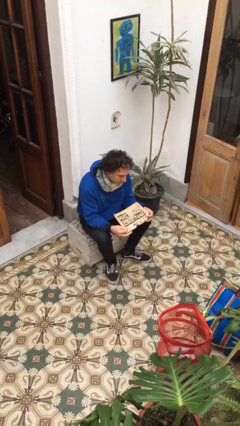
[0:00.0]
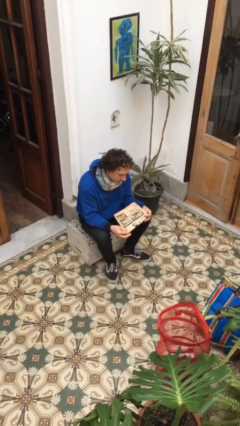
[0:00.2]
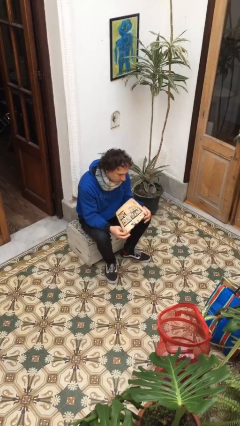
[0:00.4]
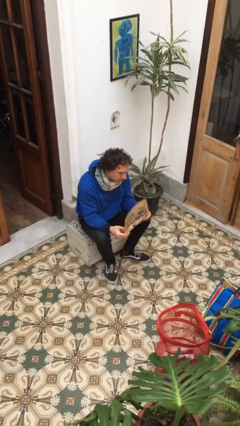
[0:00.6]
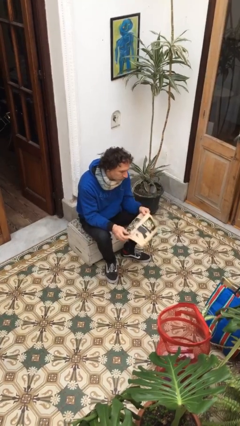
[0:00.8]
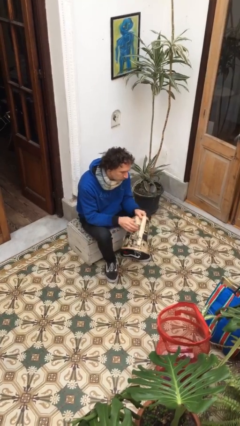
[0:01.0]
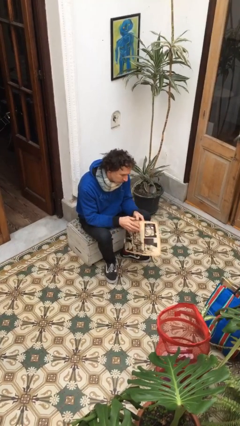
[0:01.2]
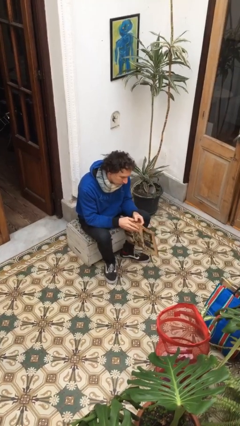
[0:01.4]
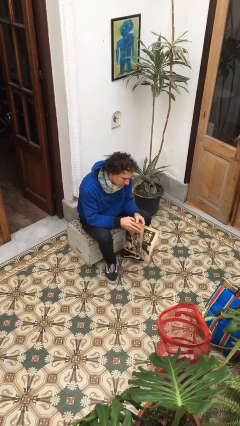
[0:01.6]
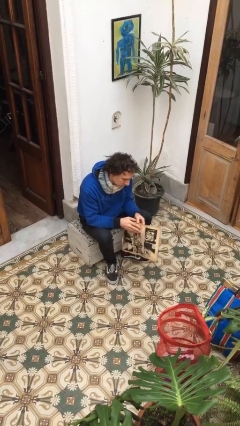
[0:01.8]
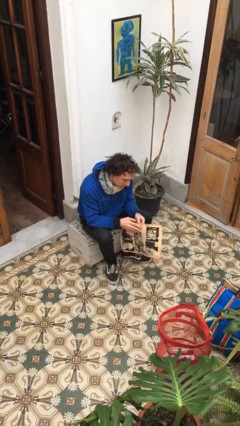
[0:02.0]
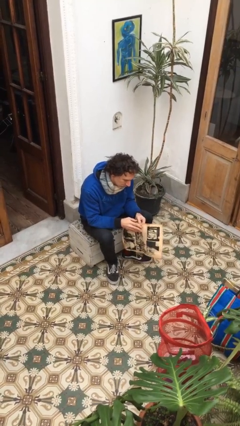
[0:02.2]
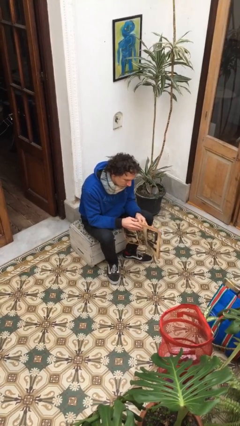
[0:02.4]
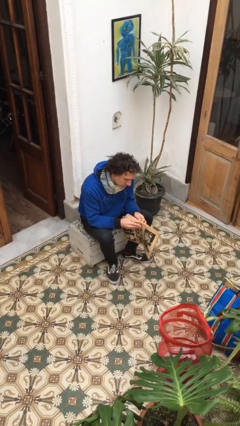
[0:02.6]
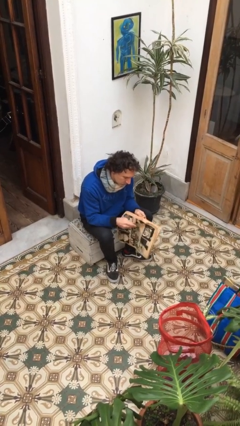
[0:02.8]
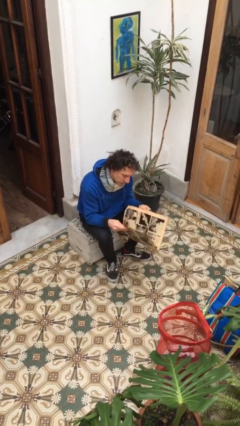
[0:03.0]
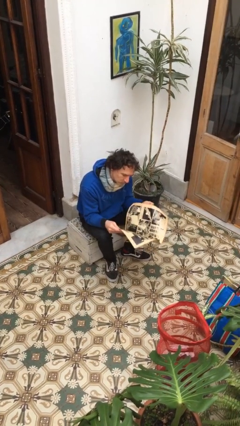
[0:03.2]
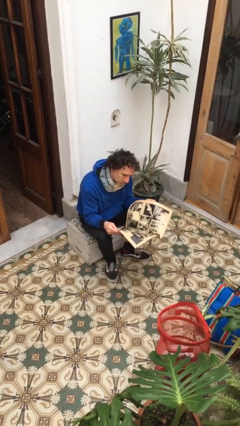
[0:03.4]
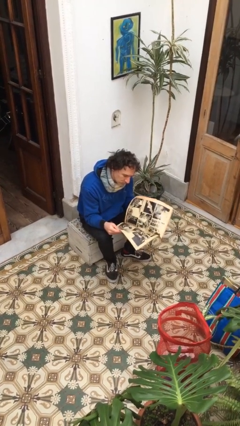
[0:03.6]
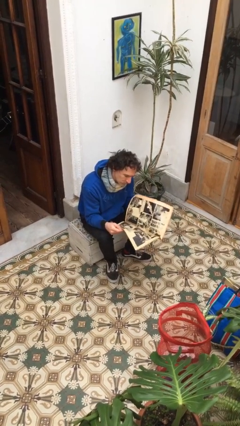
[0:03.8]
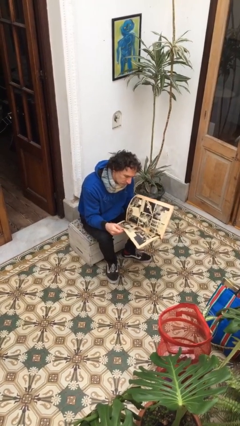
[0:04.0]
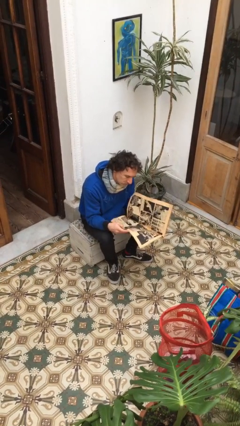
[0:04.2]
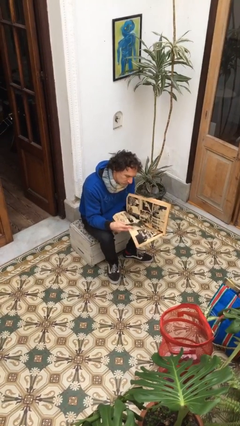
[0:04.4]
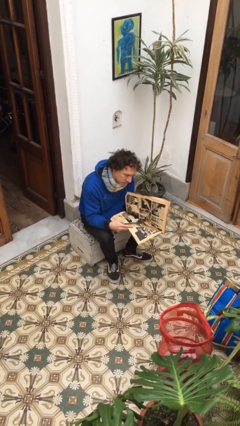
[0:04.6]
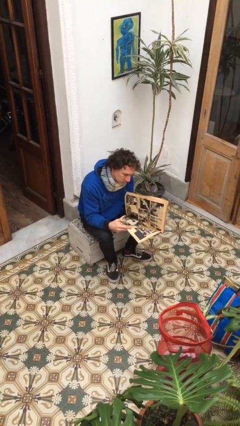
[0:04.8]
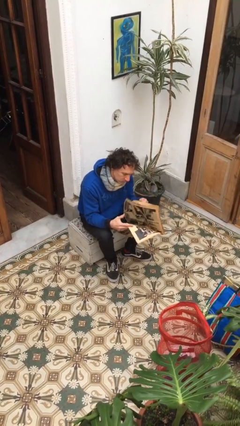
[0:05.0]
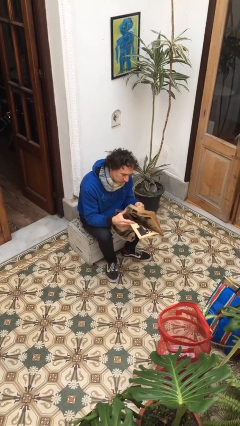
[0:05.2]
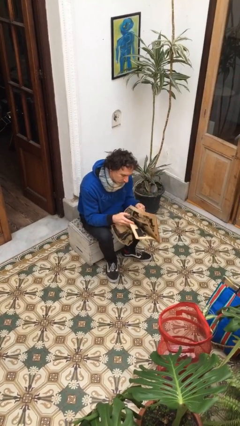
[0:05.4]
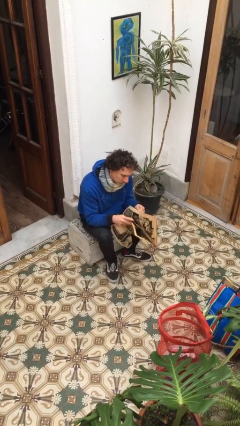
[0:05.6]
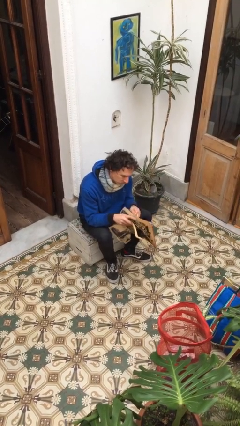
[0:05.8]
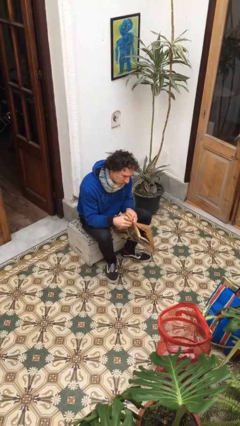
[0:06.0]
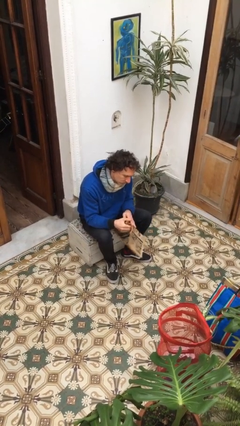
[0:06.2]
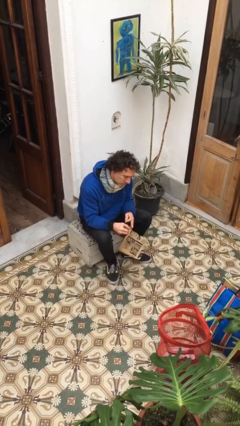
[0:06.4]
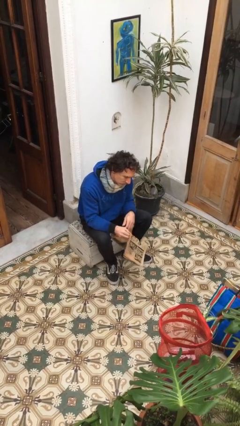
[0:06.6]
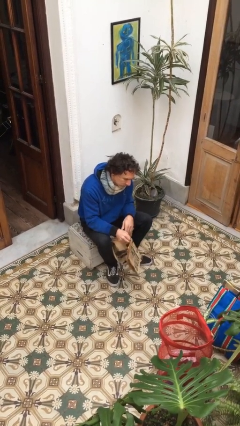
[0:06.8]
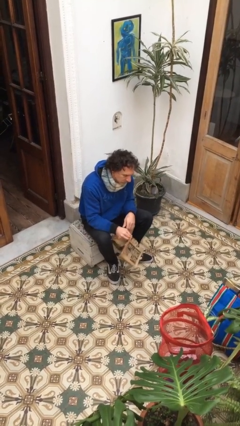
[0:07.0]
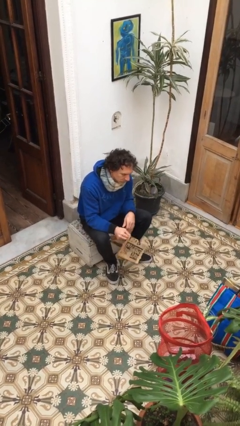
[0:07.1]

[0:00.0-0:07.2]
person reads newspaper

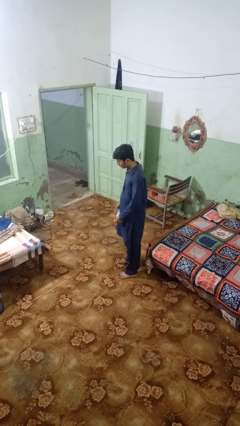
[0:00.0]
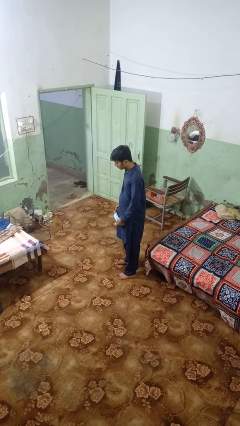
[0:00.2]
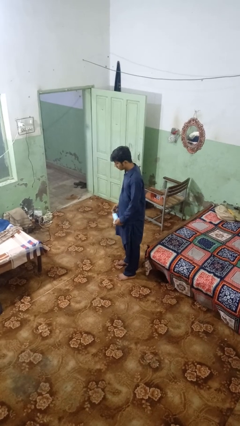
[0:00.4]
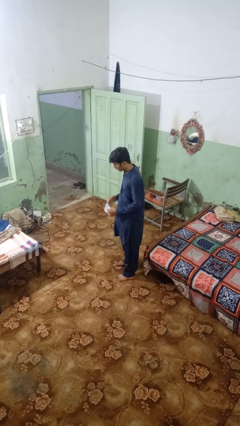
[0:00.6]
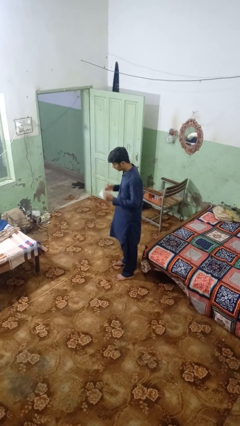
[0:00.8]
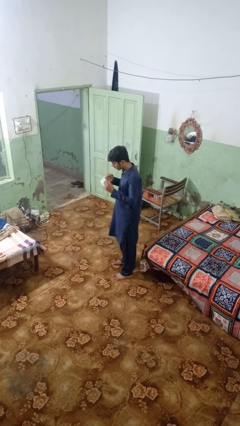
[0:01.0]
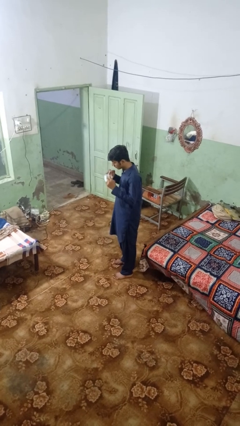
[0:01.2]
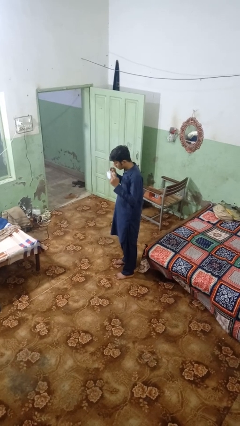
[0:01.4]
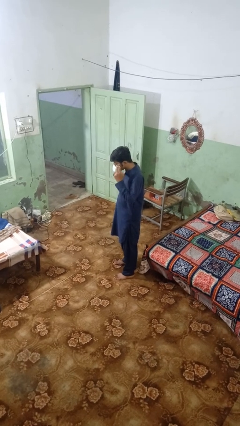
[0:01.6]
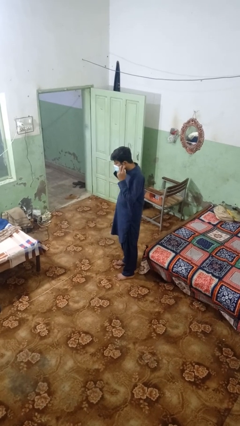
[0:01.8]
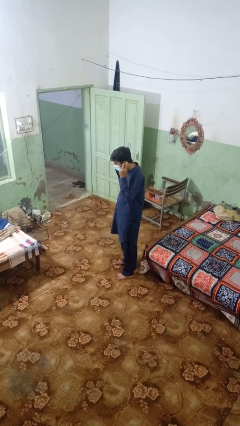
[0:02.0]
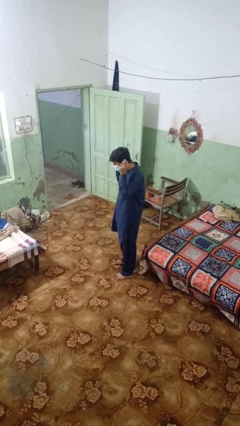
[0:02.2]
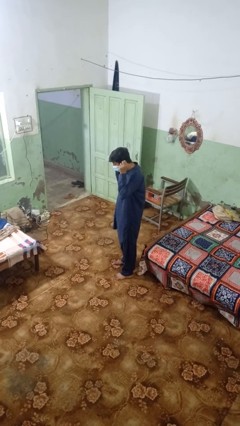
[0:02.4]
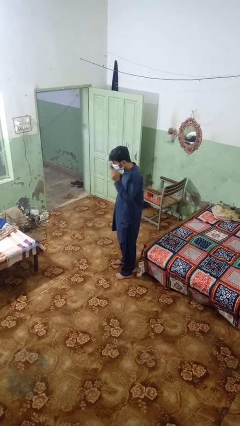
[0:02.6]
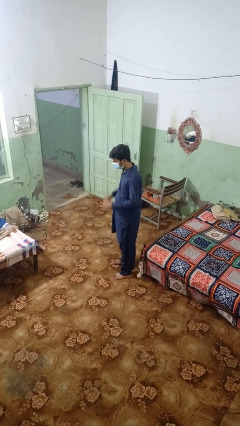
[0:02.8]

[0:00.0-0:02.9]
person puts on facemask

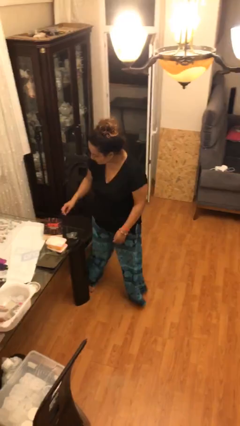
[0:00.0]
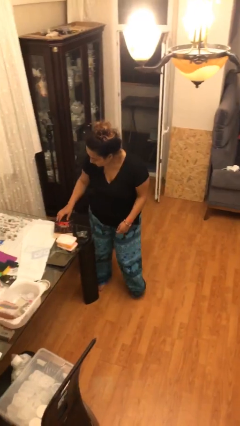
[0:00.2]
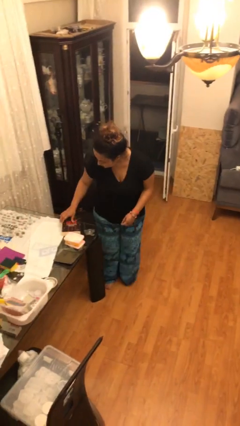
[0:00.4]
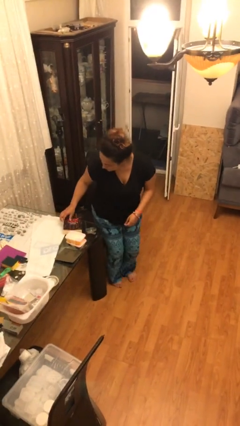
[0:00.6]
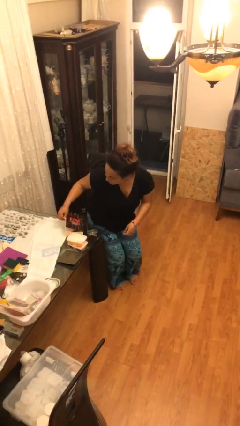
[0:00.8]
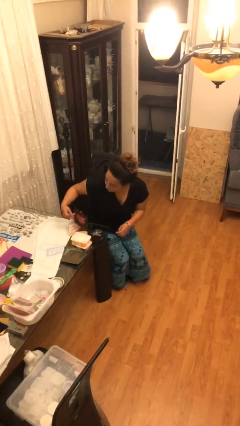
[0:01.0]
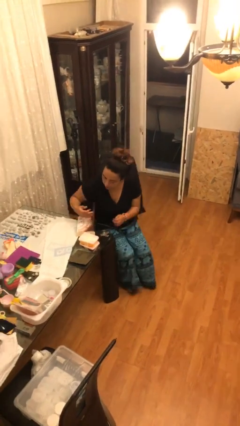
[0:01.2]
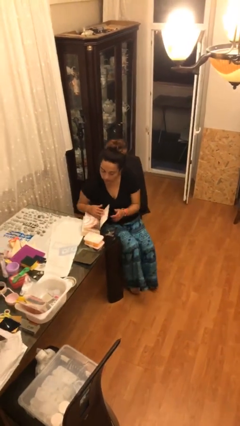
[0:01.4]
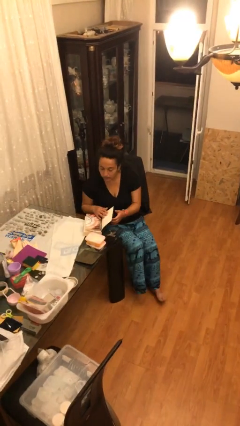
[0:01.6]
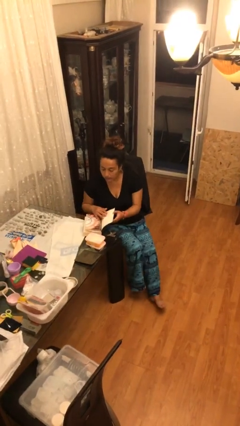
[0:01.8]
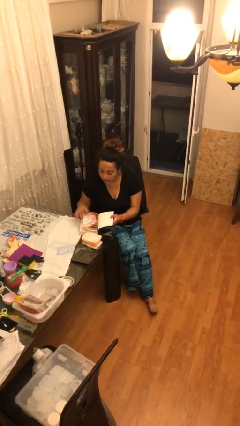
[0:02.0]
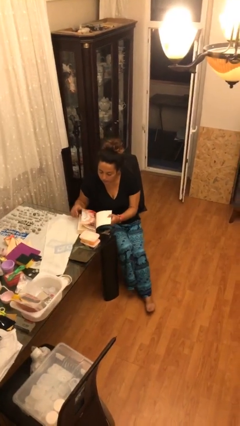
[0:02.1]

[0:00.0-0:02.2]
person sits down

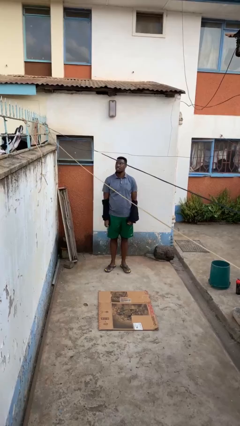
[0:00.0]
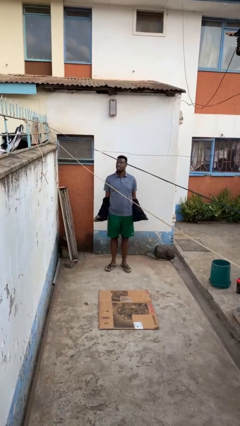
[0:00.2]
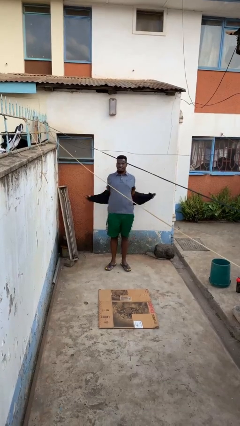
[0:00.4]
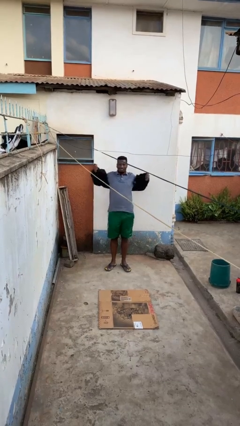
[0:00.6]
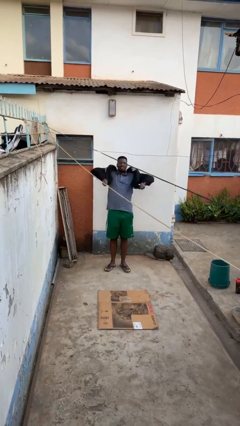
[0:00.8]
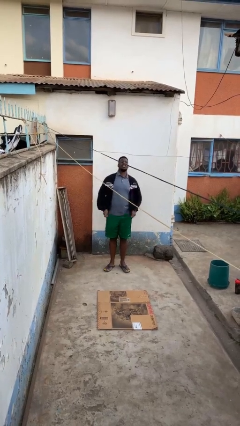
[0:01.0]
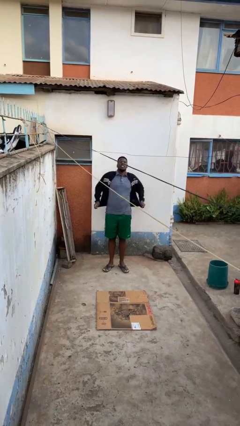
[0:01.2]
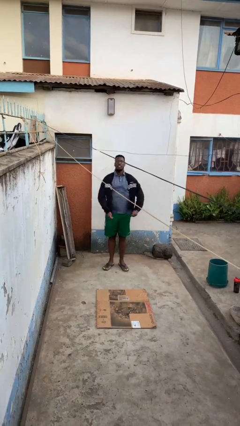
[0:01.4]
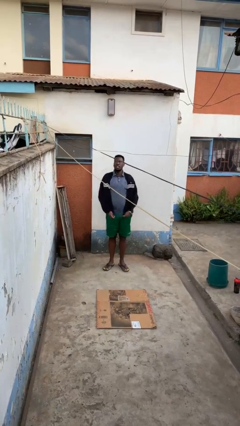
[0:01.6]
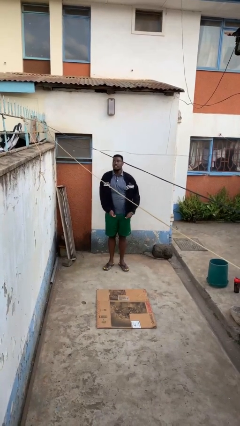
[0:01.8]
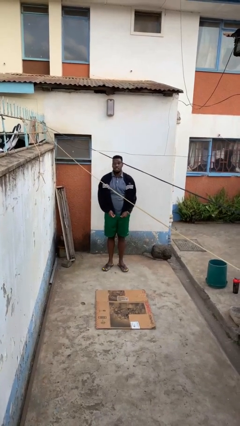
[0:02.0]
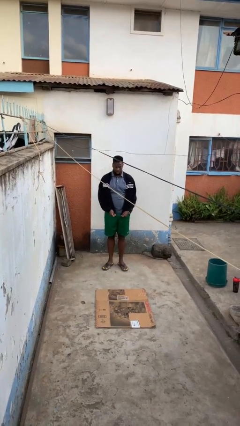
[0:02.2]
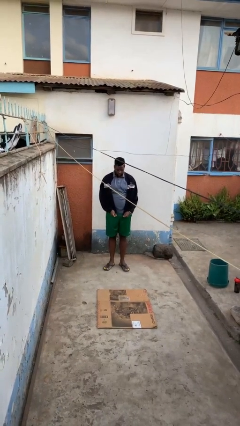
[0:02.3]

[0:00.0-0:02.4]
person puts on jacket

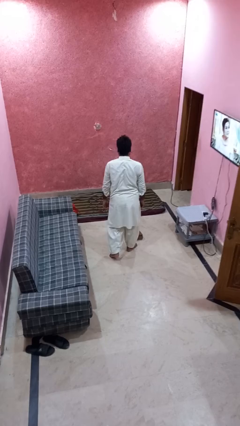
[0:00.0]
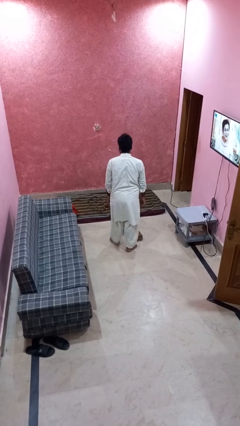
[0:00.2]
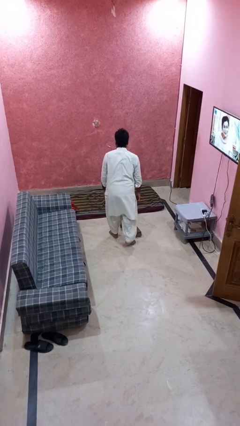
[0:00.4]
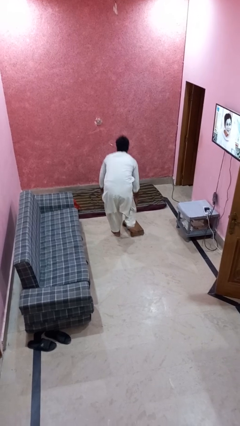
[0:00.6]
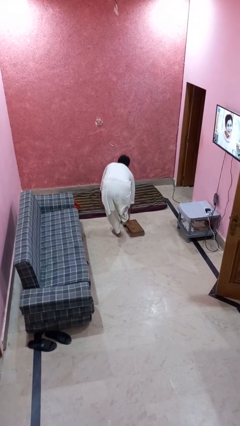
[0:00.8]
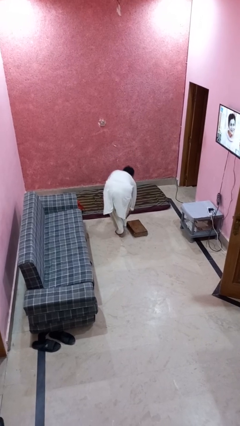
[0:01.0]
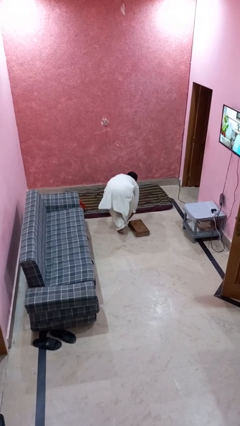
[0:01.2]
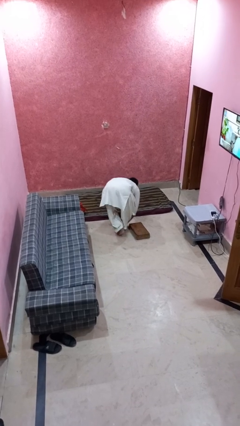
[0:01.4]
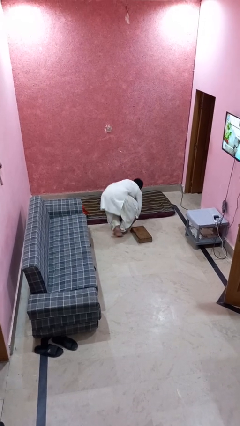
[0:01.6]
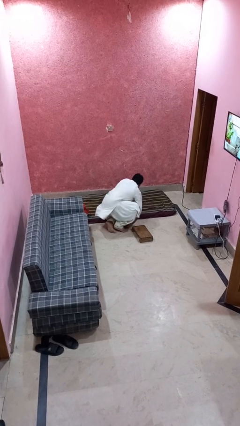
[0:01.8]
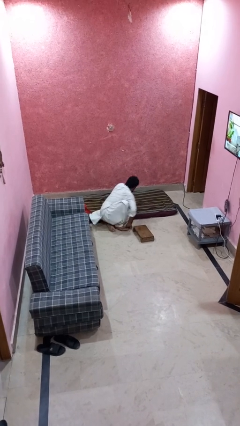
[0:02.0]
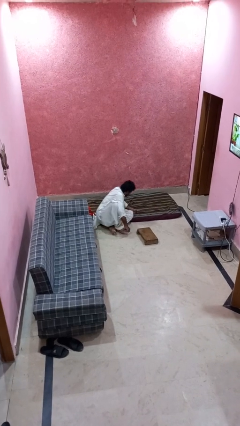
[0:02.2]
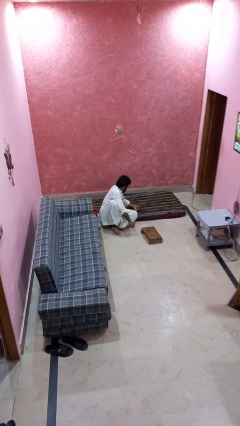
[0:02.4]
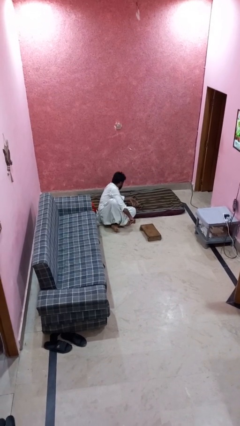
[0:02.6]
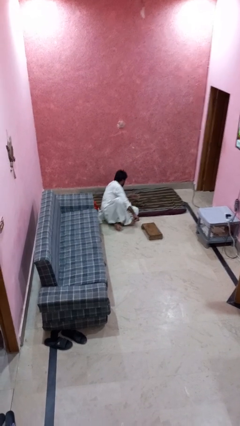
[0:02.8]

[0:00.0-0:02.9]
person trips on object on floor

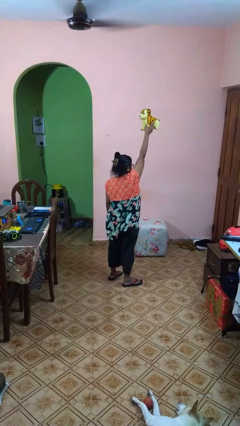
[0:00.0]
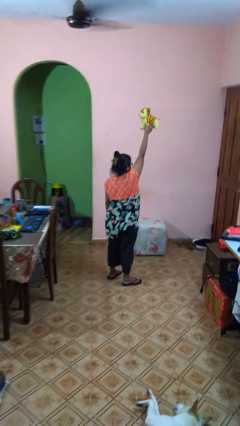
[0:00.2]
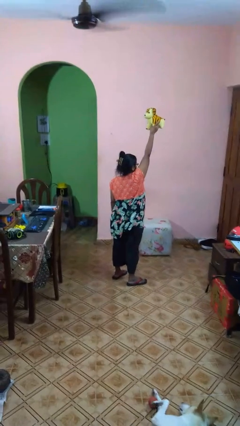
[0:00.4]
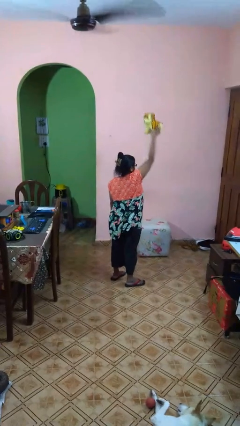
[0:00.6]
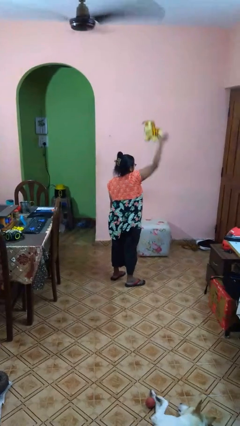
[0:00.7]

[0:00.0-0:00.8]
person drops object
